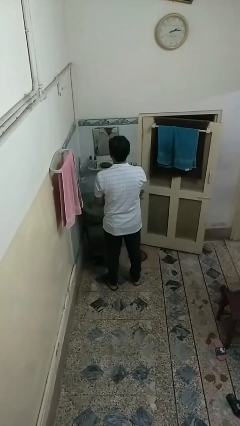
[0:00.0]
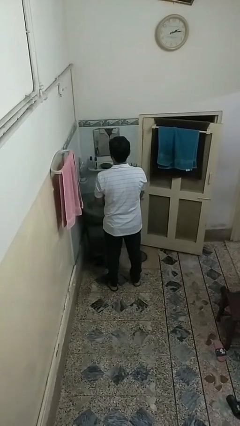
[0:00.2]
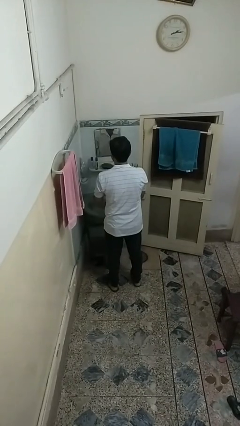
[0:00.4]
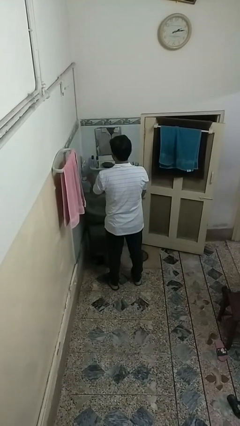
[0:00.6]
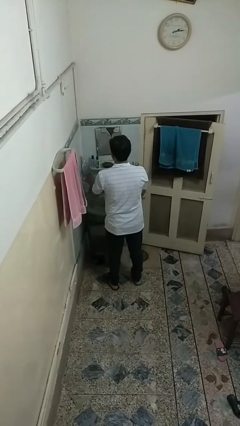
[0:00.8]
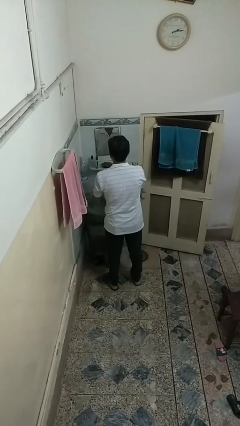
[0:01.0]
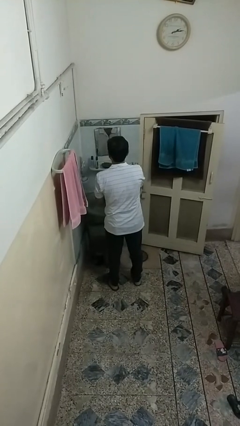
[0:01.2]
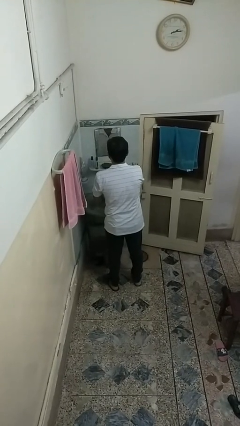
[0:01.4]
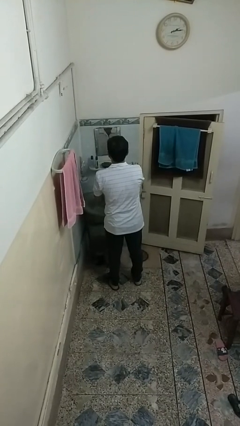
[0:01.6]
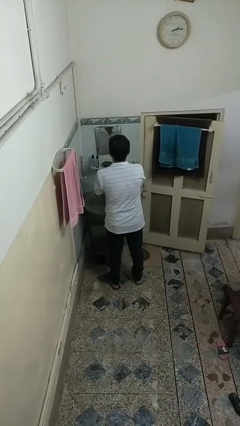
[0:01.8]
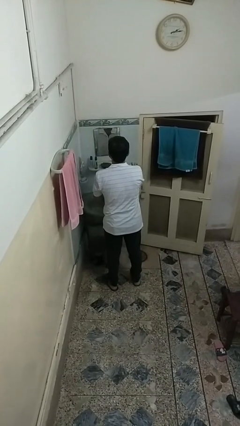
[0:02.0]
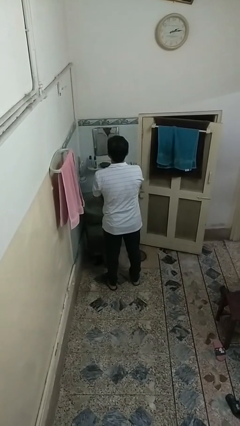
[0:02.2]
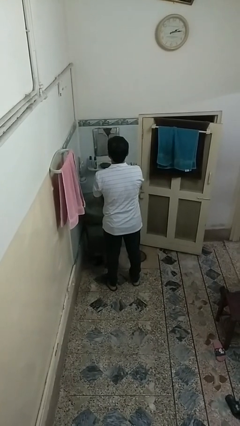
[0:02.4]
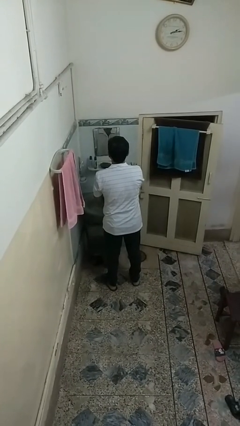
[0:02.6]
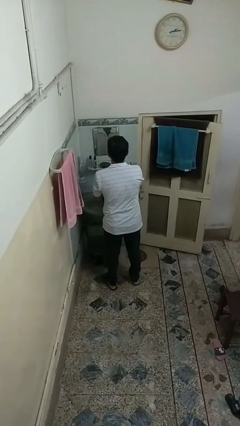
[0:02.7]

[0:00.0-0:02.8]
person washes hands

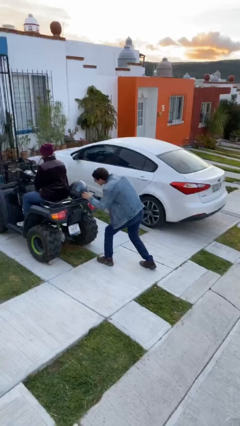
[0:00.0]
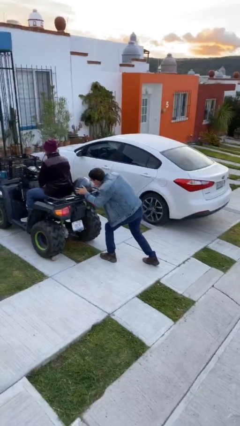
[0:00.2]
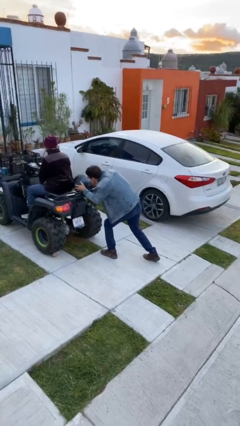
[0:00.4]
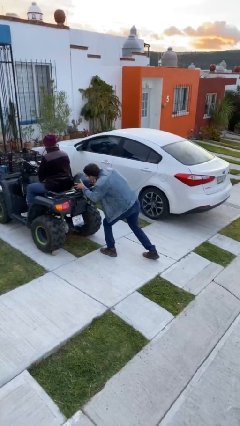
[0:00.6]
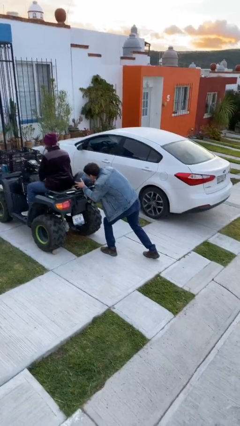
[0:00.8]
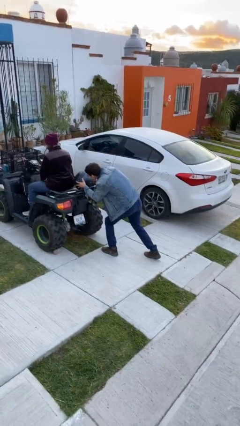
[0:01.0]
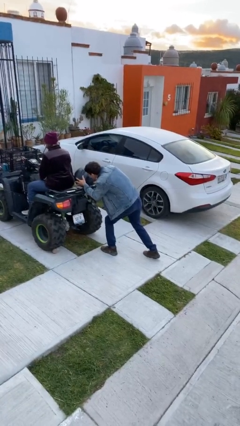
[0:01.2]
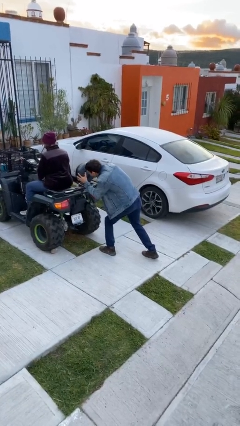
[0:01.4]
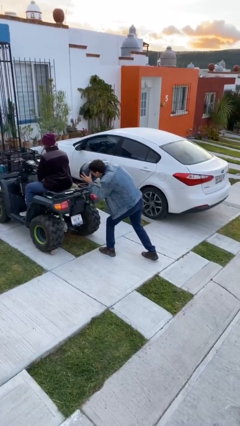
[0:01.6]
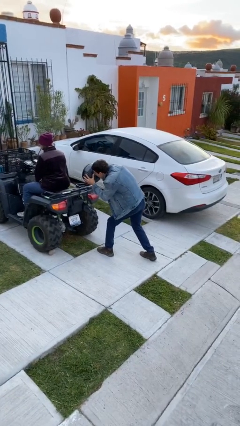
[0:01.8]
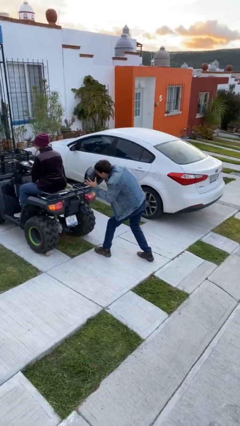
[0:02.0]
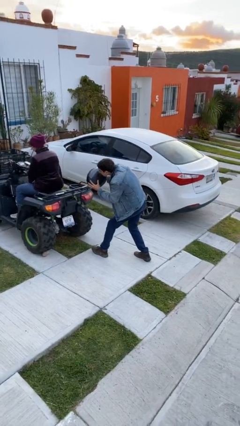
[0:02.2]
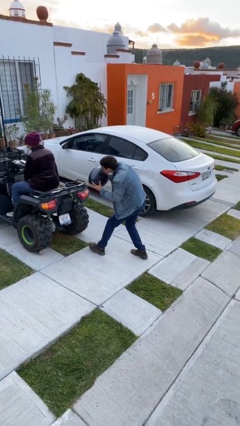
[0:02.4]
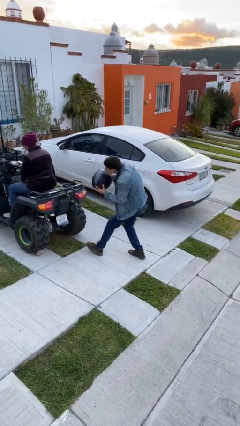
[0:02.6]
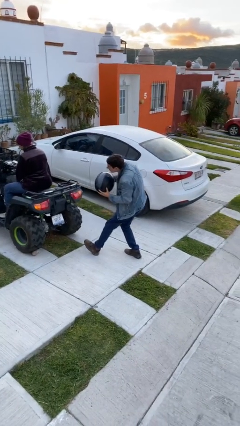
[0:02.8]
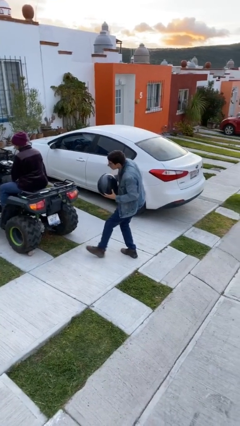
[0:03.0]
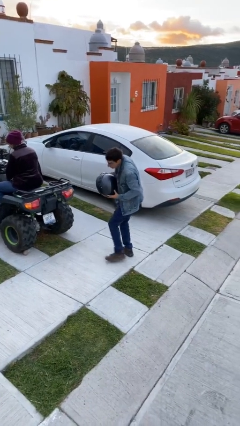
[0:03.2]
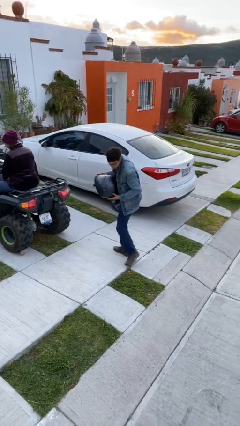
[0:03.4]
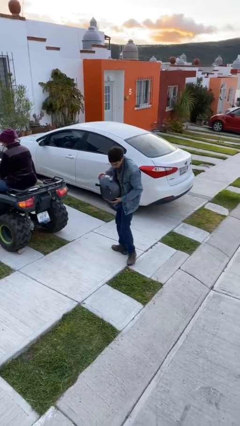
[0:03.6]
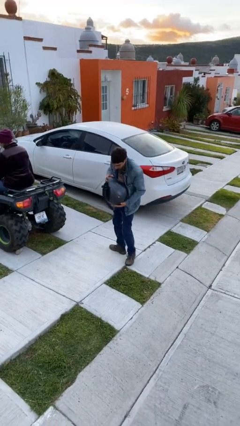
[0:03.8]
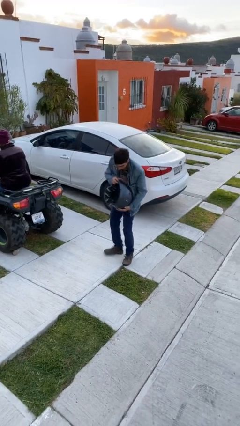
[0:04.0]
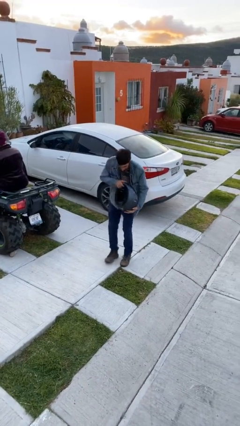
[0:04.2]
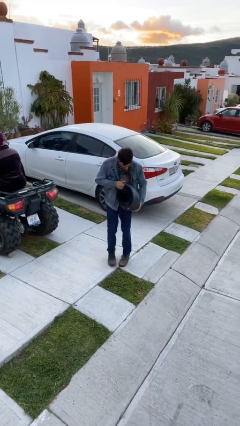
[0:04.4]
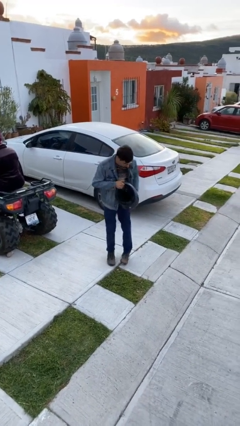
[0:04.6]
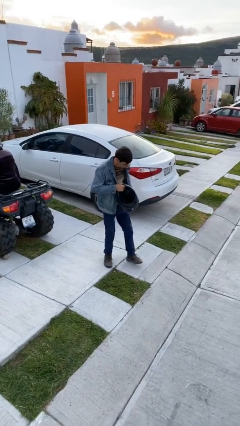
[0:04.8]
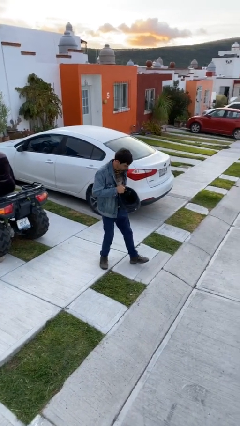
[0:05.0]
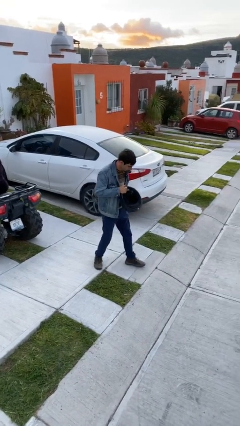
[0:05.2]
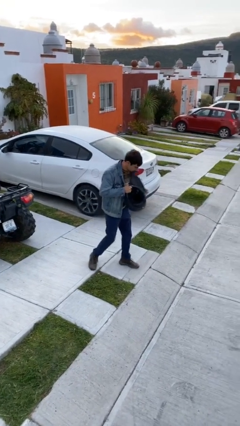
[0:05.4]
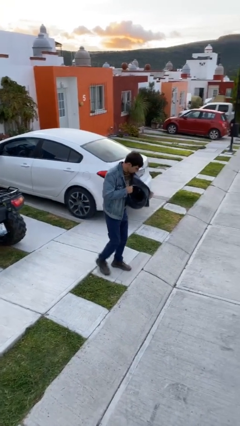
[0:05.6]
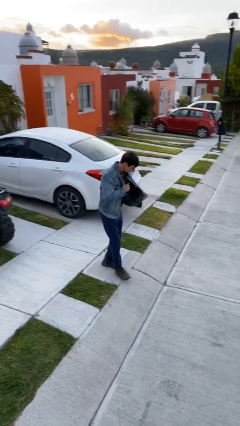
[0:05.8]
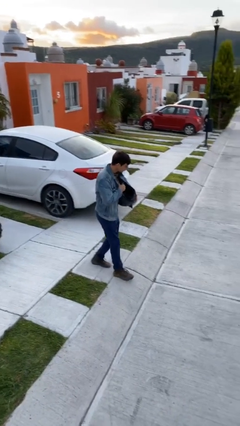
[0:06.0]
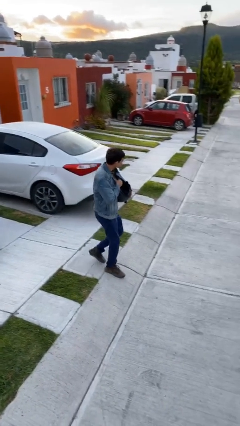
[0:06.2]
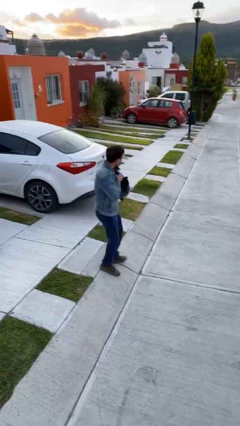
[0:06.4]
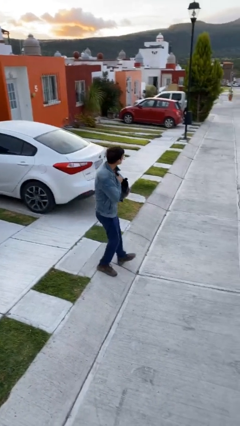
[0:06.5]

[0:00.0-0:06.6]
person steals object from person

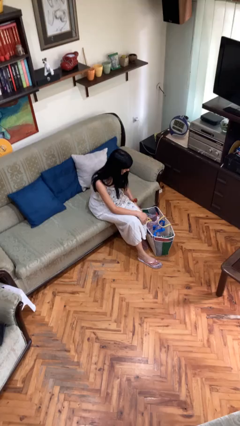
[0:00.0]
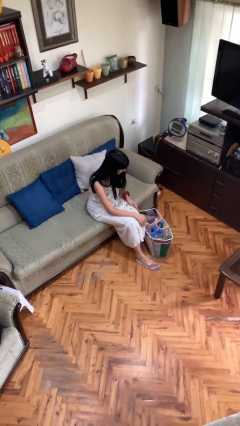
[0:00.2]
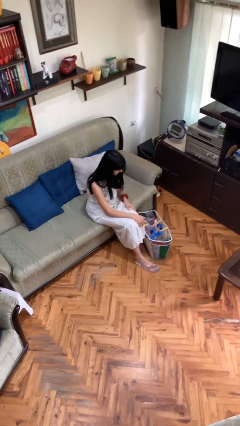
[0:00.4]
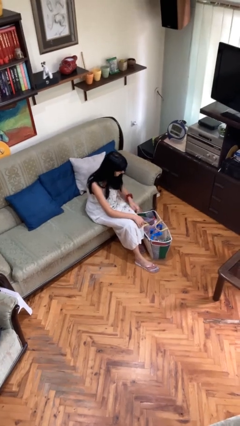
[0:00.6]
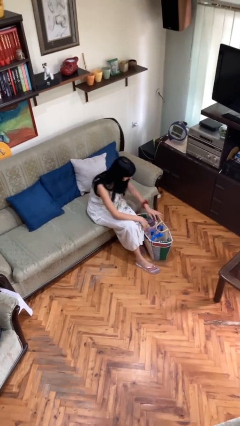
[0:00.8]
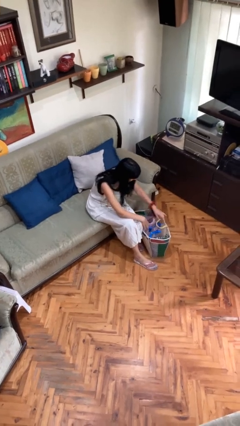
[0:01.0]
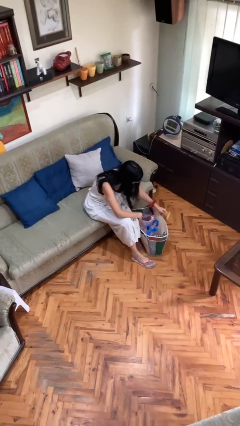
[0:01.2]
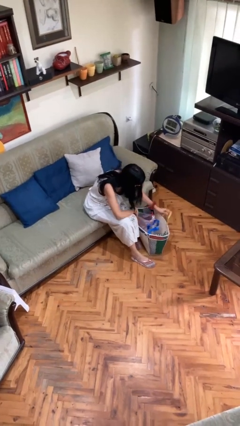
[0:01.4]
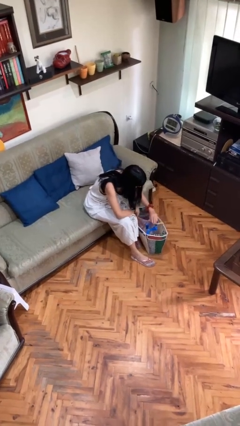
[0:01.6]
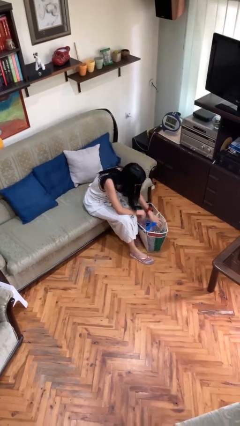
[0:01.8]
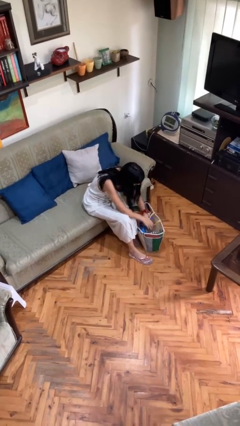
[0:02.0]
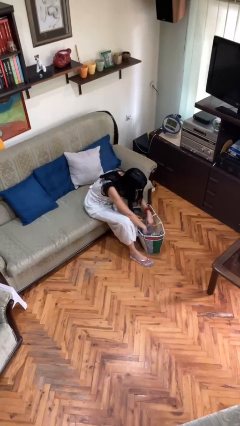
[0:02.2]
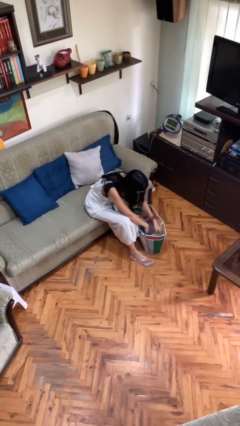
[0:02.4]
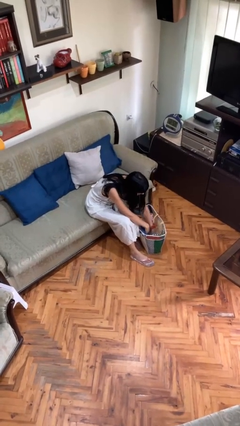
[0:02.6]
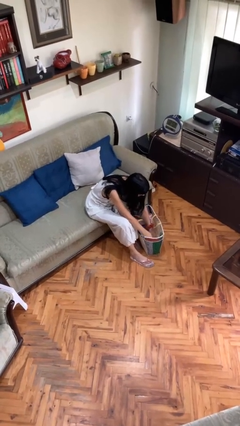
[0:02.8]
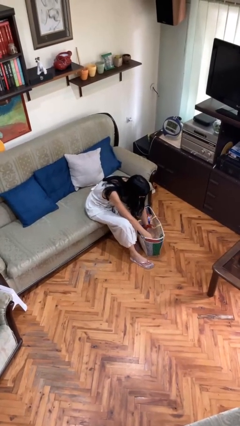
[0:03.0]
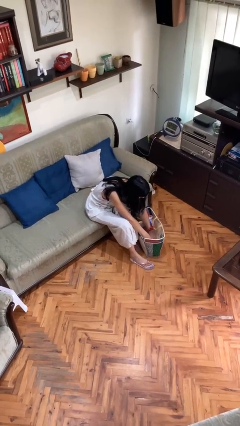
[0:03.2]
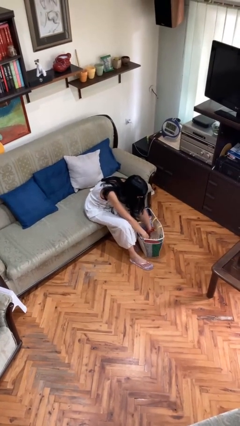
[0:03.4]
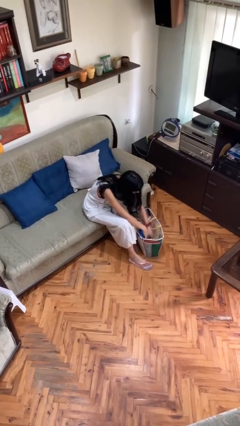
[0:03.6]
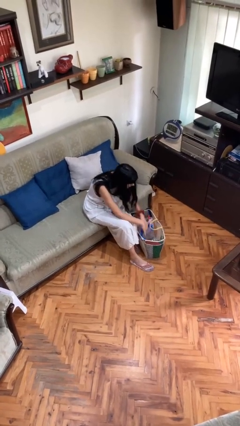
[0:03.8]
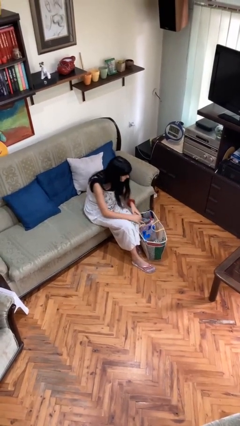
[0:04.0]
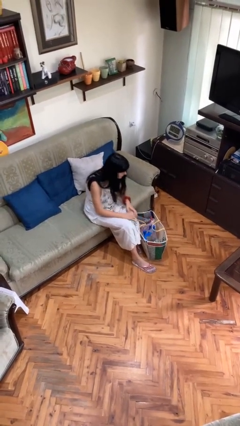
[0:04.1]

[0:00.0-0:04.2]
person searches in bag

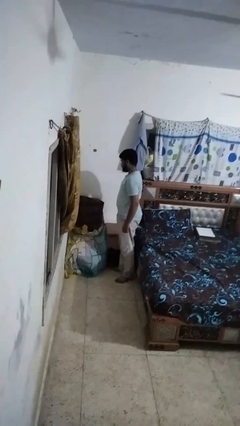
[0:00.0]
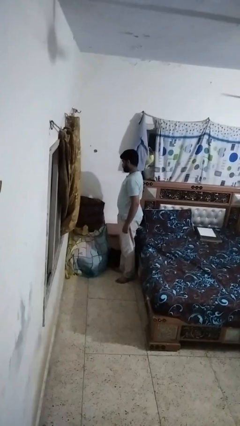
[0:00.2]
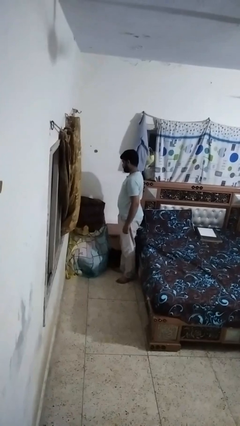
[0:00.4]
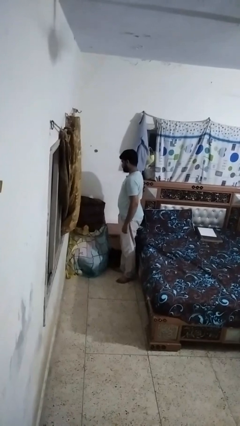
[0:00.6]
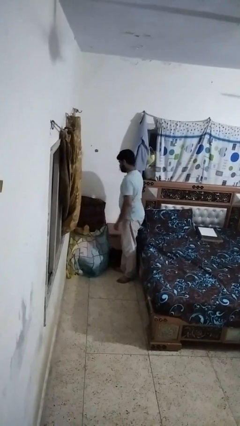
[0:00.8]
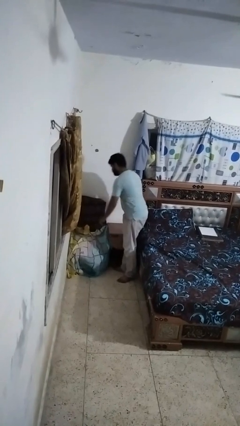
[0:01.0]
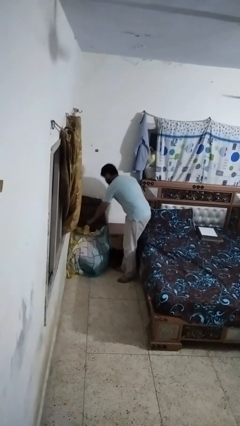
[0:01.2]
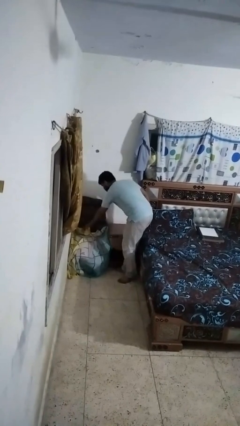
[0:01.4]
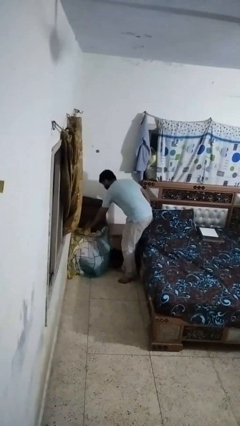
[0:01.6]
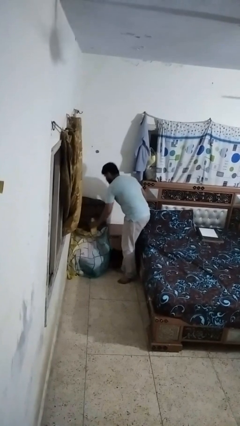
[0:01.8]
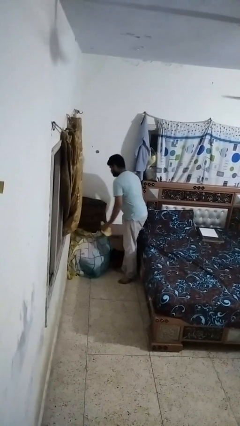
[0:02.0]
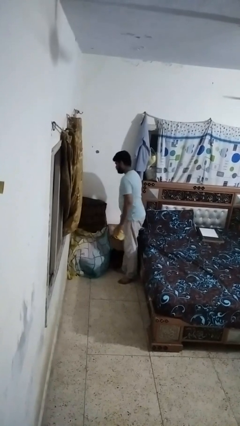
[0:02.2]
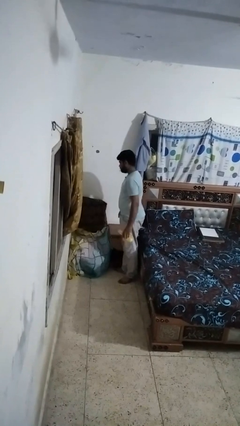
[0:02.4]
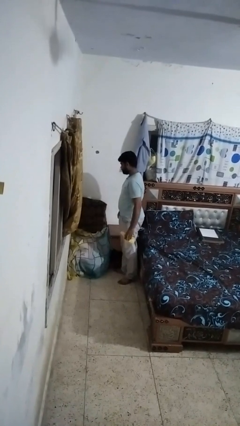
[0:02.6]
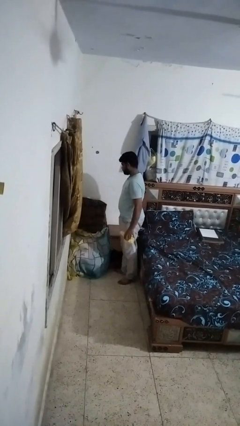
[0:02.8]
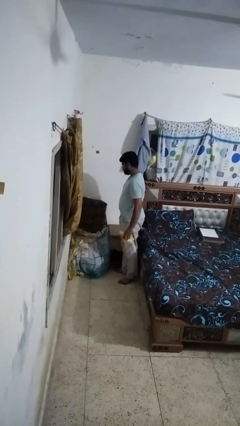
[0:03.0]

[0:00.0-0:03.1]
person picks up object from couch

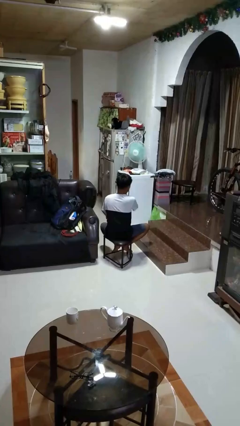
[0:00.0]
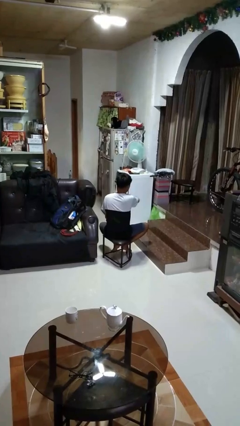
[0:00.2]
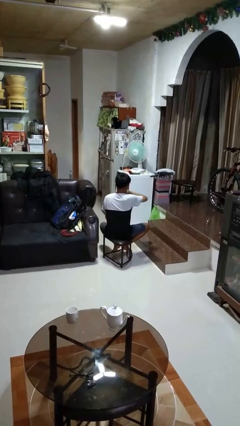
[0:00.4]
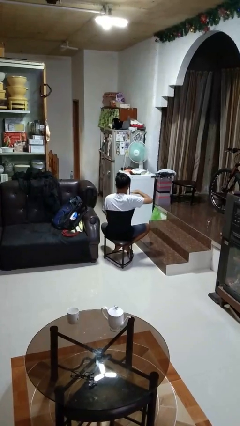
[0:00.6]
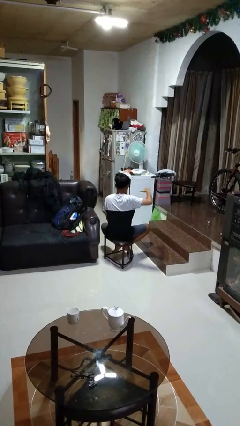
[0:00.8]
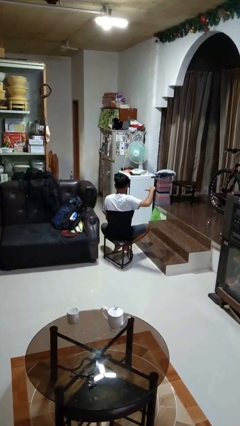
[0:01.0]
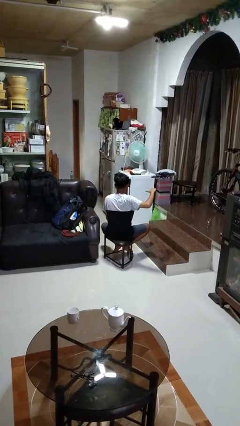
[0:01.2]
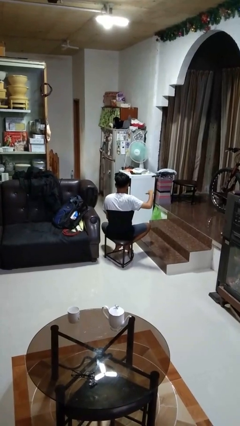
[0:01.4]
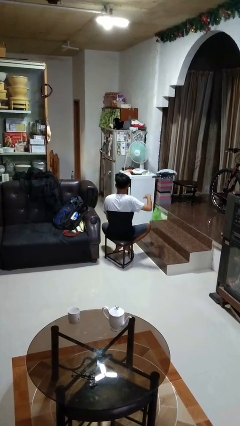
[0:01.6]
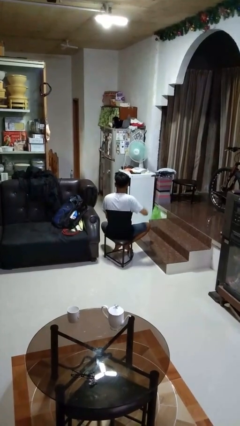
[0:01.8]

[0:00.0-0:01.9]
person gestures cut
